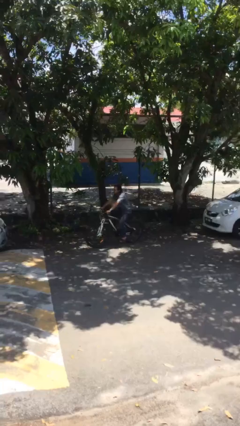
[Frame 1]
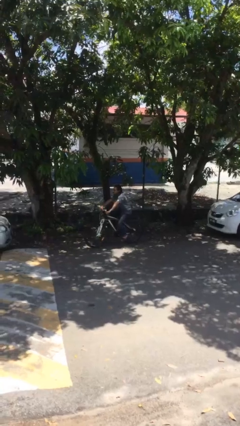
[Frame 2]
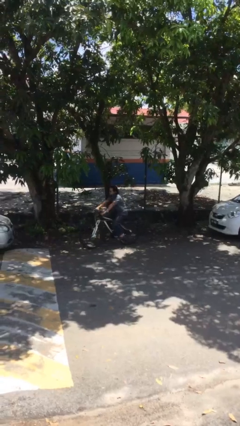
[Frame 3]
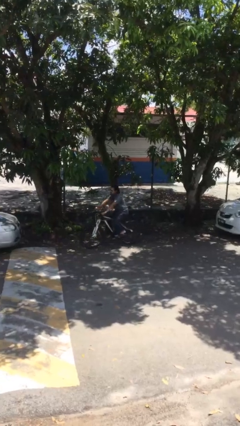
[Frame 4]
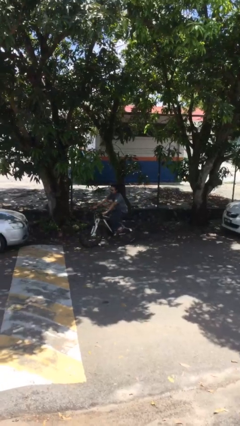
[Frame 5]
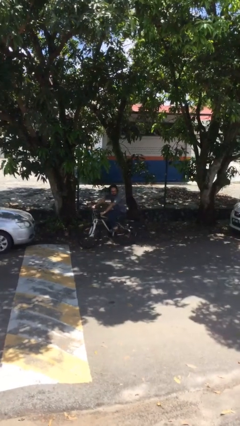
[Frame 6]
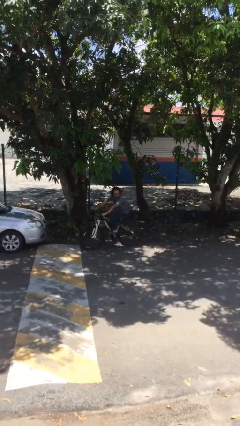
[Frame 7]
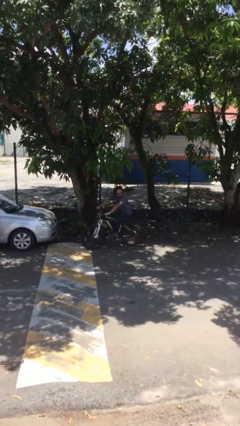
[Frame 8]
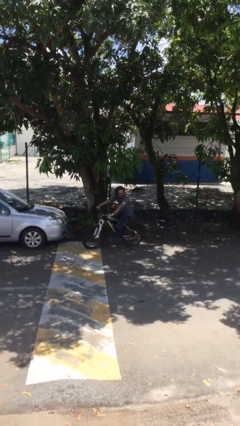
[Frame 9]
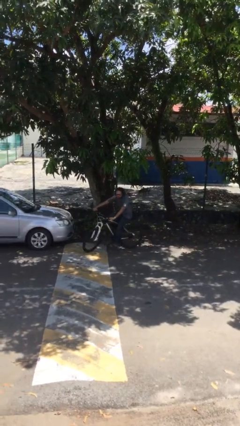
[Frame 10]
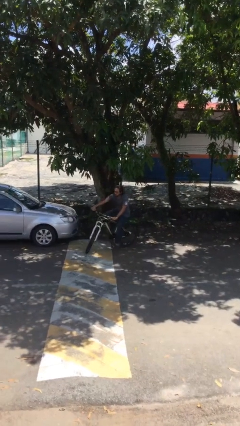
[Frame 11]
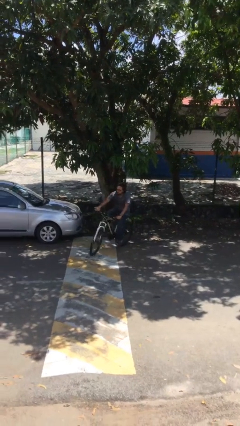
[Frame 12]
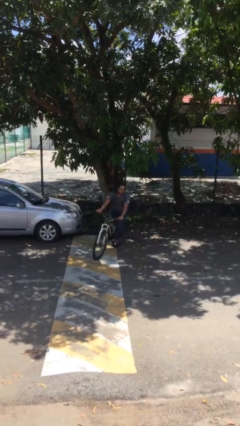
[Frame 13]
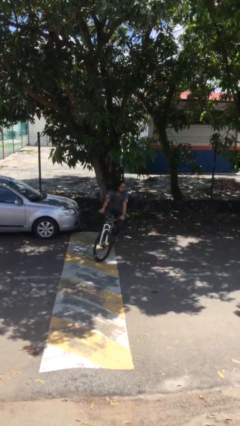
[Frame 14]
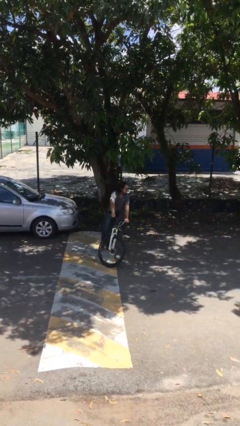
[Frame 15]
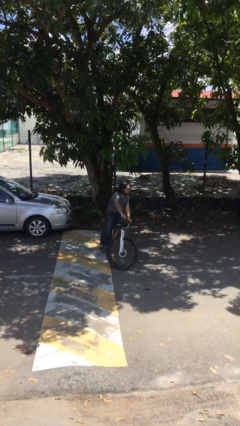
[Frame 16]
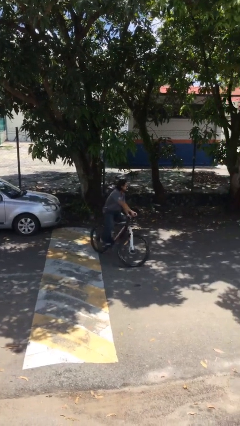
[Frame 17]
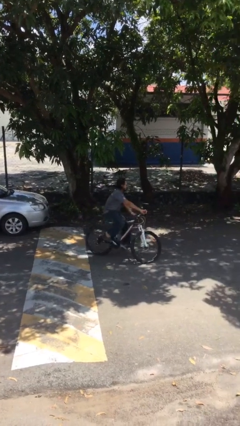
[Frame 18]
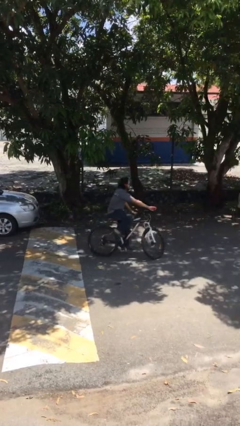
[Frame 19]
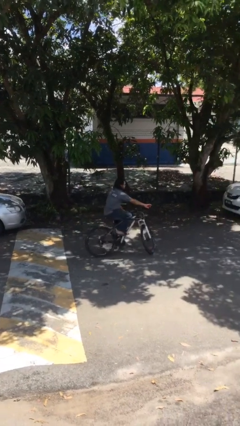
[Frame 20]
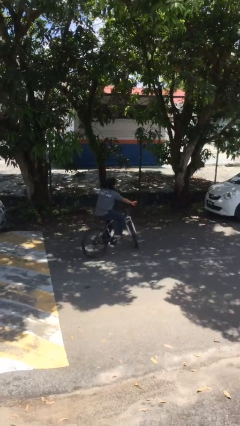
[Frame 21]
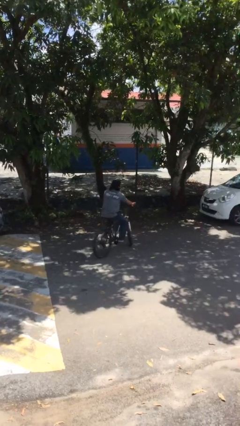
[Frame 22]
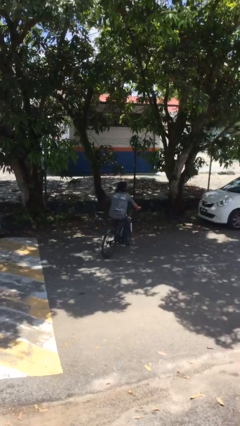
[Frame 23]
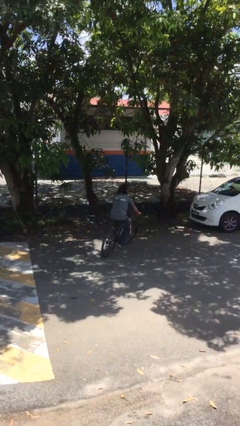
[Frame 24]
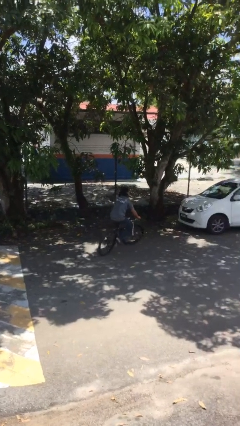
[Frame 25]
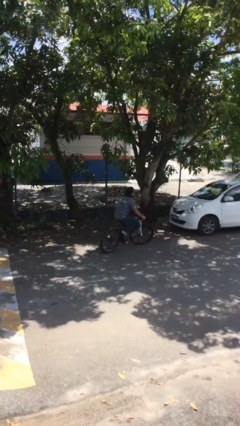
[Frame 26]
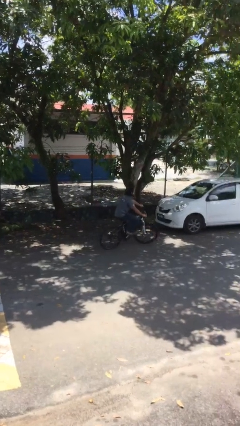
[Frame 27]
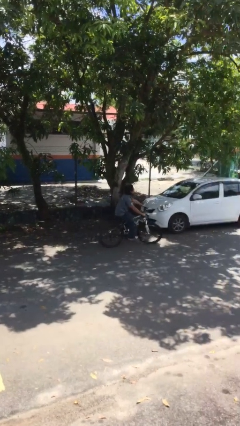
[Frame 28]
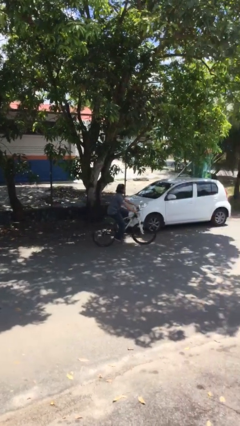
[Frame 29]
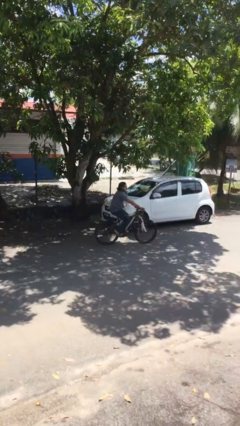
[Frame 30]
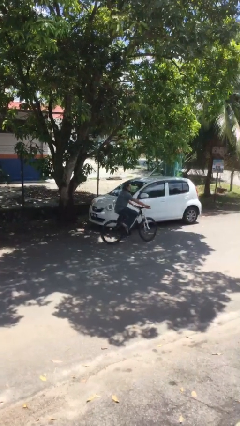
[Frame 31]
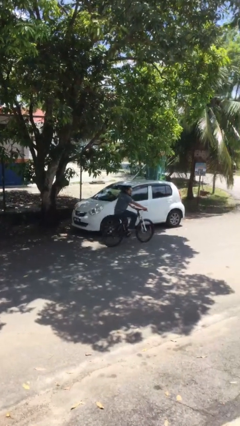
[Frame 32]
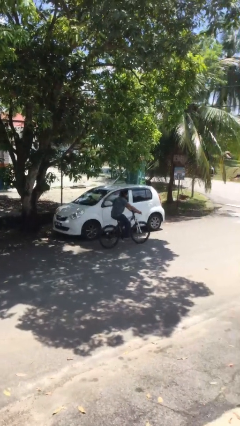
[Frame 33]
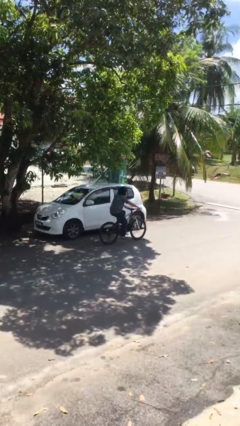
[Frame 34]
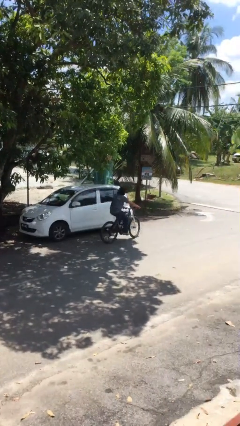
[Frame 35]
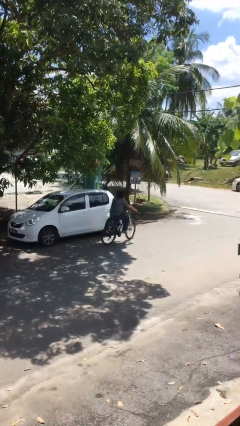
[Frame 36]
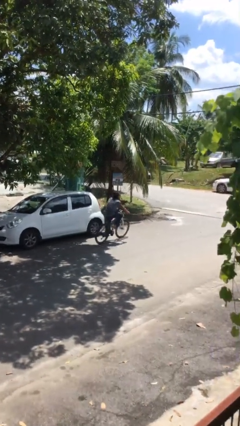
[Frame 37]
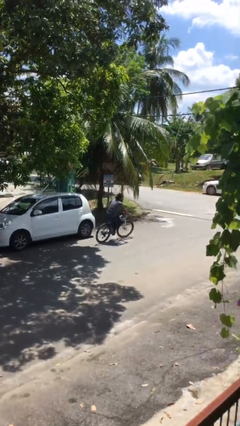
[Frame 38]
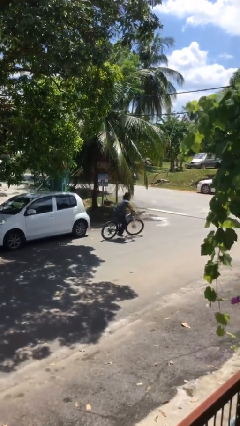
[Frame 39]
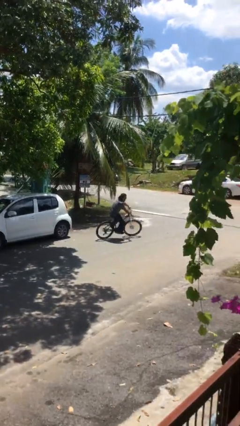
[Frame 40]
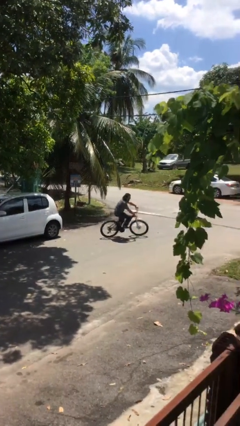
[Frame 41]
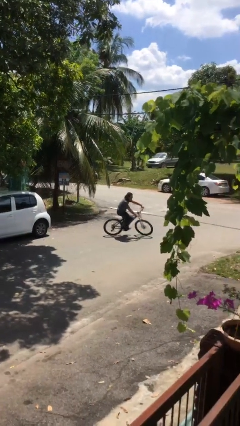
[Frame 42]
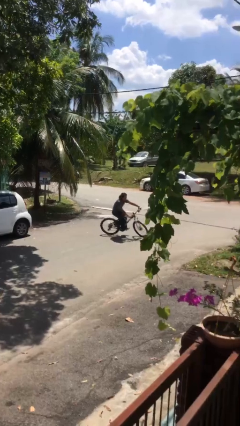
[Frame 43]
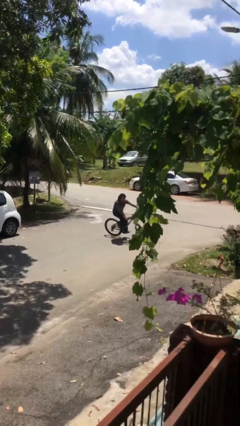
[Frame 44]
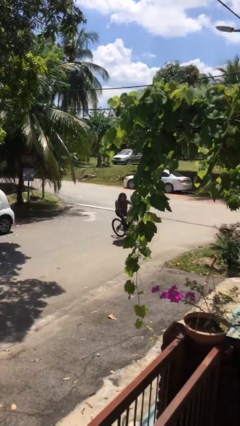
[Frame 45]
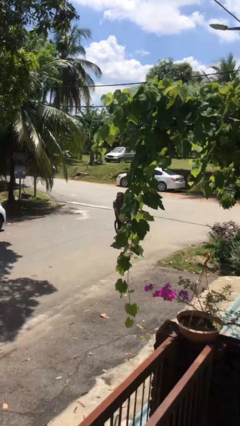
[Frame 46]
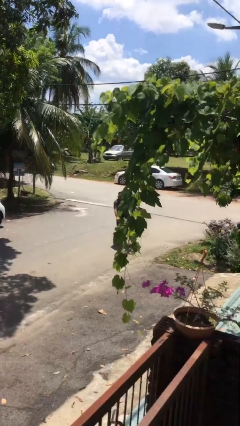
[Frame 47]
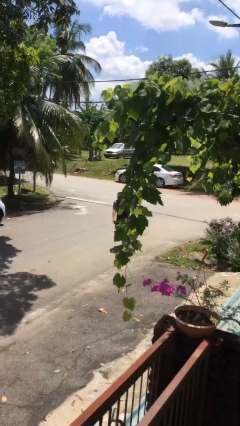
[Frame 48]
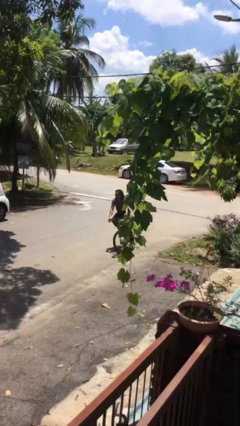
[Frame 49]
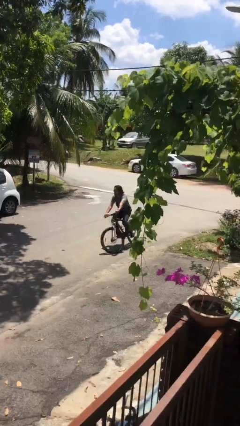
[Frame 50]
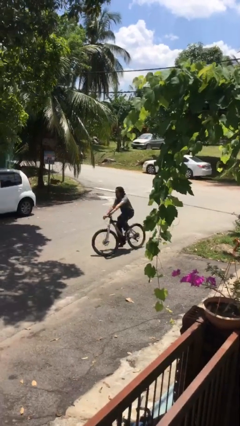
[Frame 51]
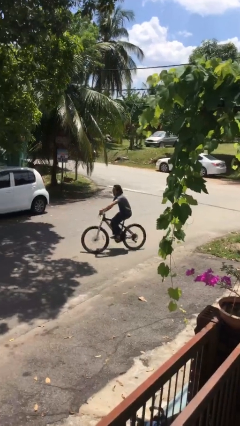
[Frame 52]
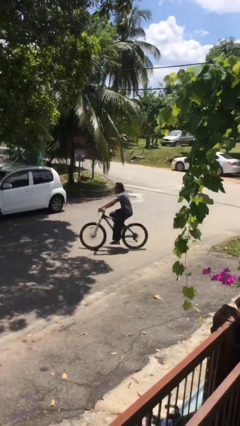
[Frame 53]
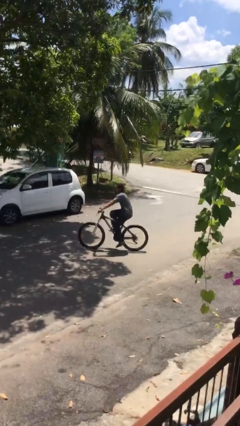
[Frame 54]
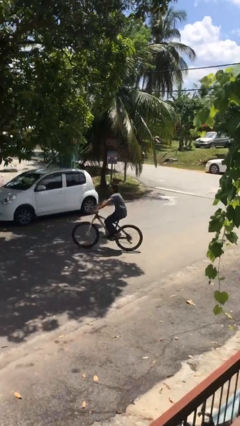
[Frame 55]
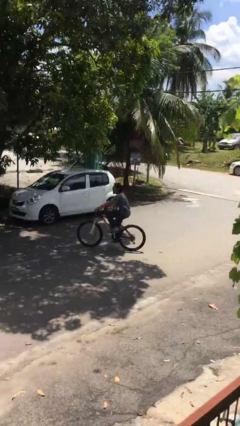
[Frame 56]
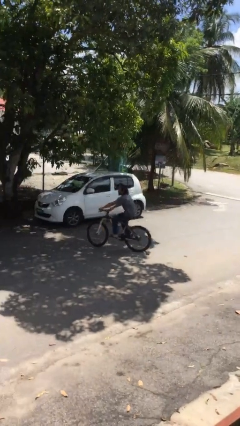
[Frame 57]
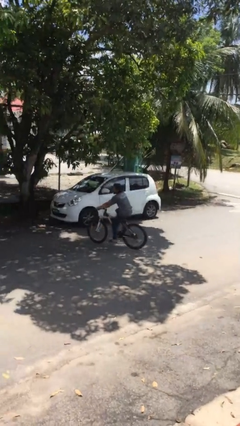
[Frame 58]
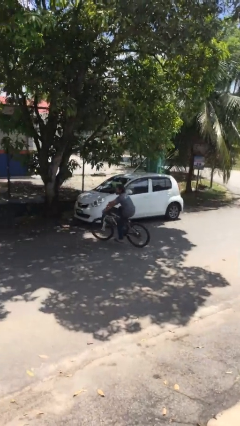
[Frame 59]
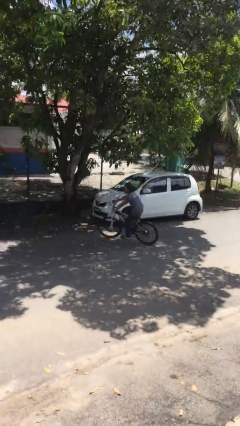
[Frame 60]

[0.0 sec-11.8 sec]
person rides bicycle

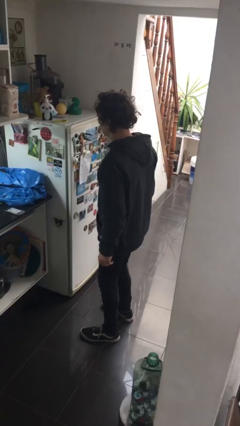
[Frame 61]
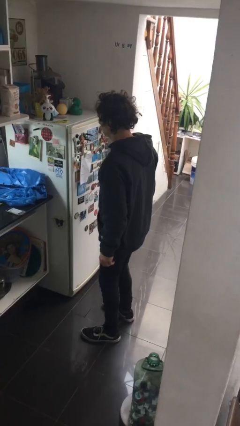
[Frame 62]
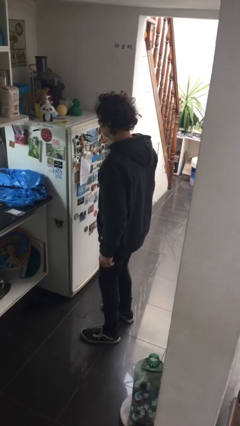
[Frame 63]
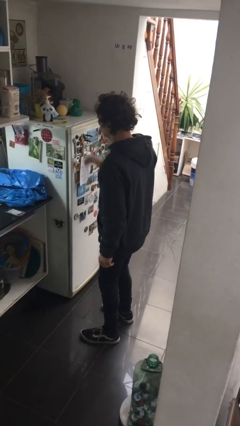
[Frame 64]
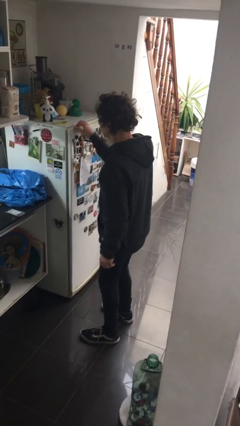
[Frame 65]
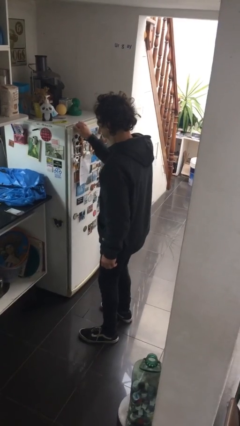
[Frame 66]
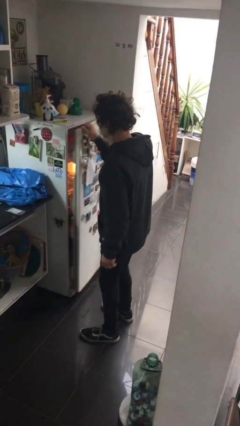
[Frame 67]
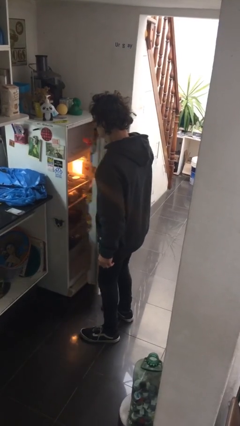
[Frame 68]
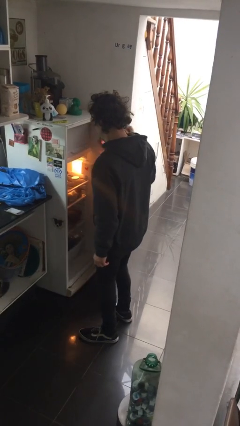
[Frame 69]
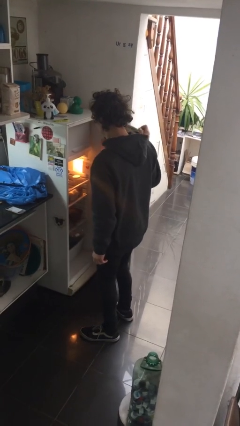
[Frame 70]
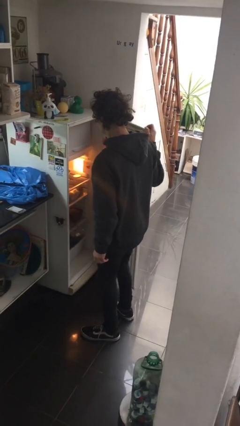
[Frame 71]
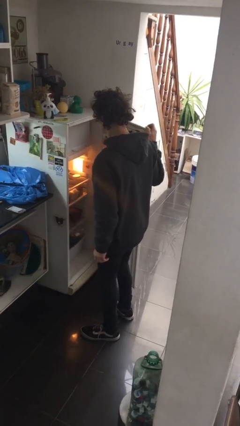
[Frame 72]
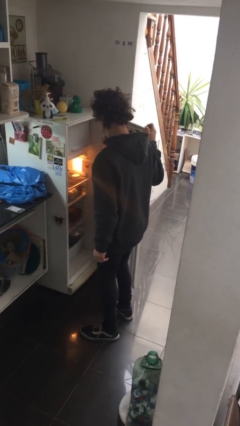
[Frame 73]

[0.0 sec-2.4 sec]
person opens refrigerator

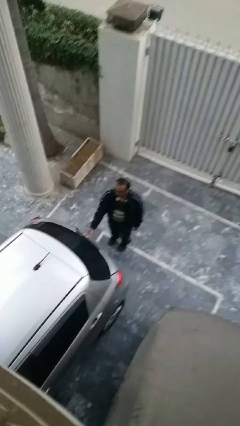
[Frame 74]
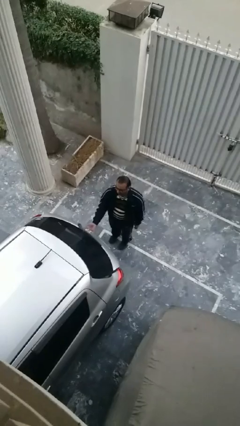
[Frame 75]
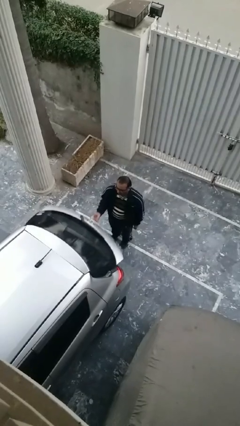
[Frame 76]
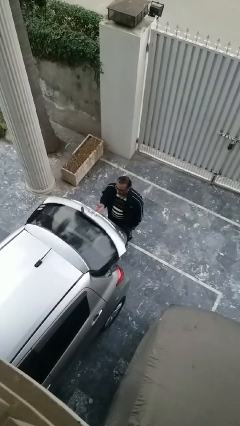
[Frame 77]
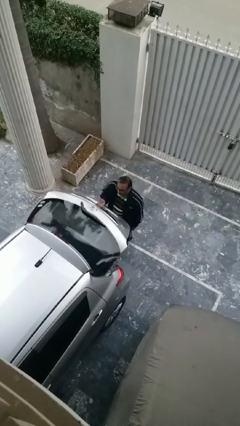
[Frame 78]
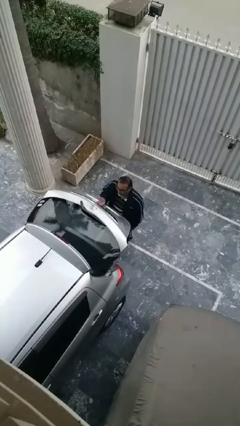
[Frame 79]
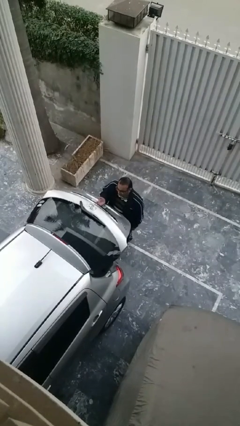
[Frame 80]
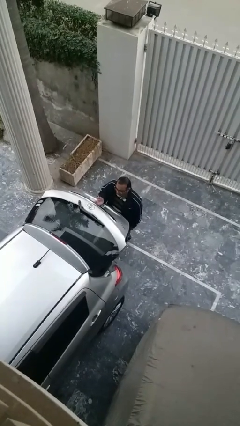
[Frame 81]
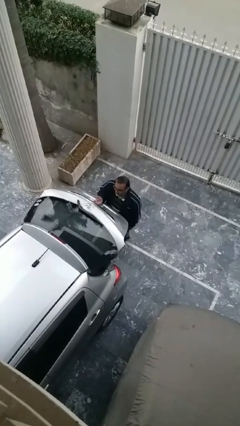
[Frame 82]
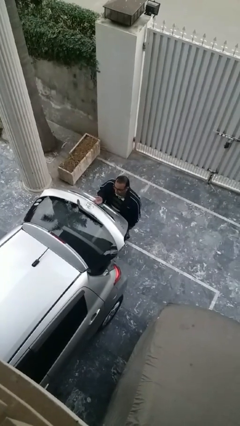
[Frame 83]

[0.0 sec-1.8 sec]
person opens car trunk

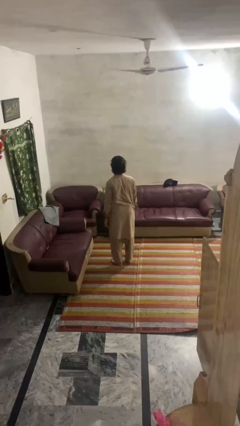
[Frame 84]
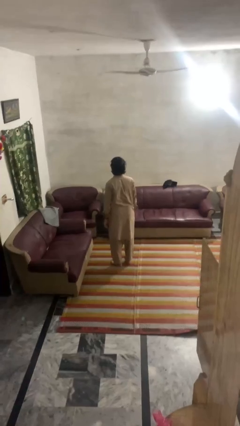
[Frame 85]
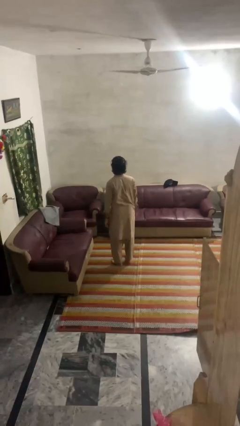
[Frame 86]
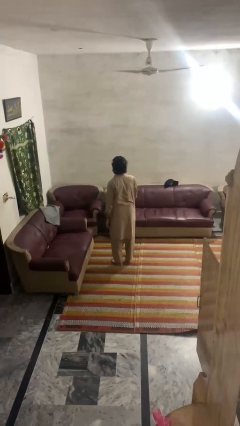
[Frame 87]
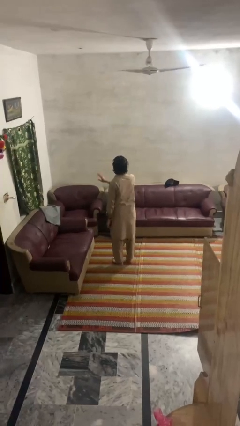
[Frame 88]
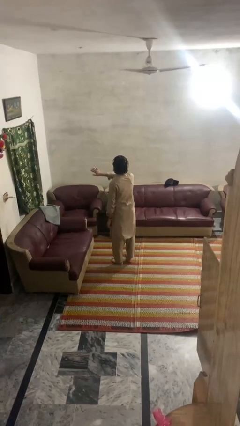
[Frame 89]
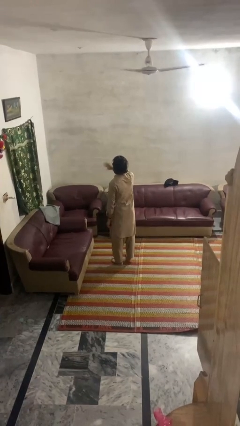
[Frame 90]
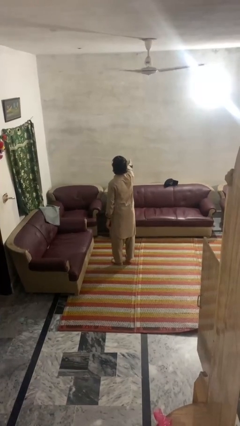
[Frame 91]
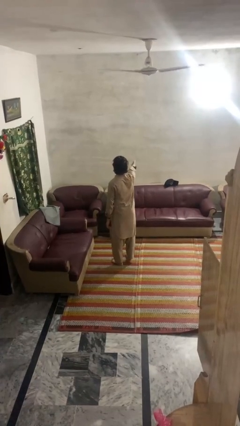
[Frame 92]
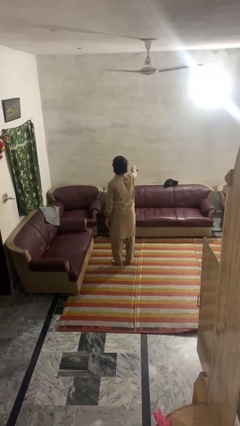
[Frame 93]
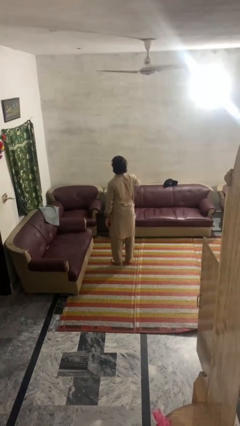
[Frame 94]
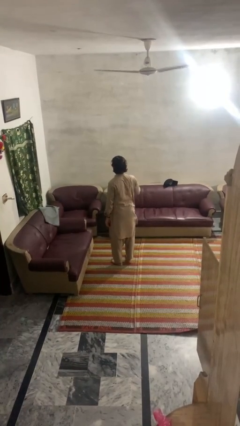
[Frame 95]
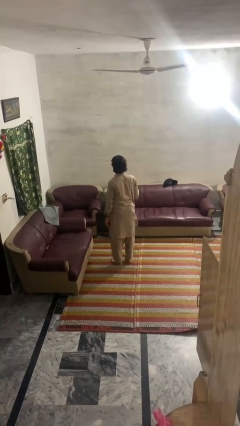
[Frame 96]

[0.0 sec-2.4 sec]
person gestures swipe right
